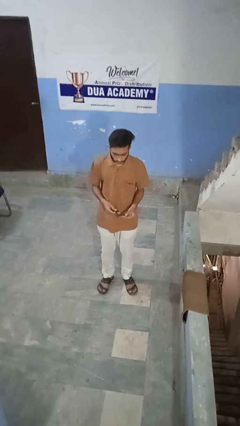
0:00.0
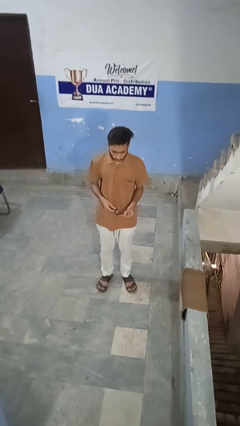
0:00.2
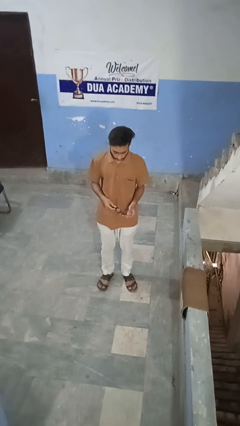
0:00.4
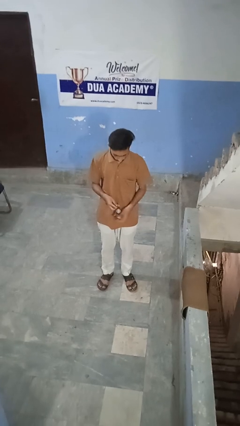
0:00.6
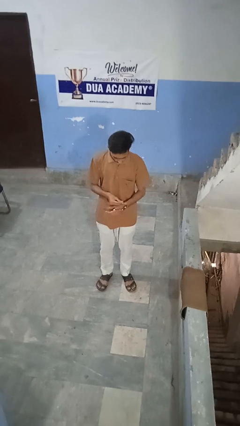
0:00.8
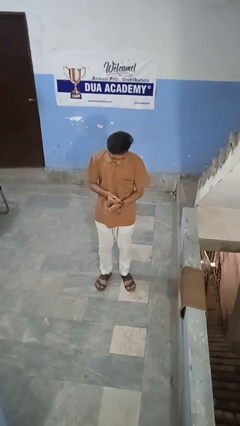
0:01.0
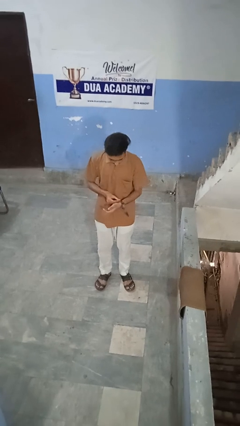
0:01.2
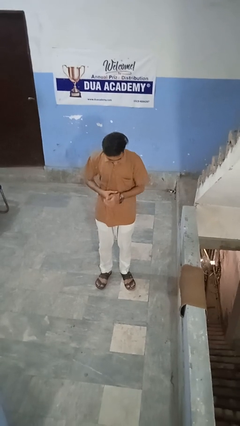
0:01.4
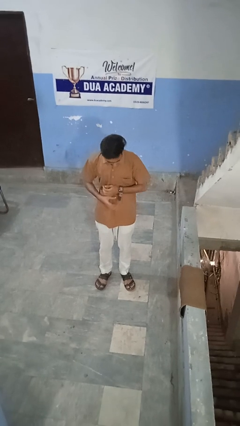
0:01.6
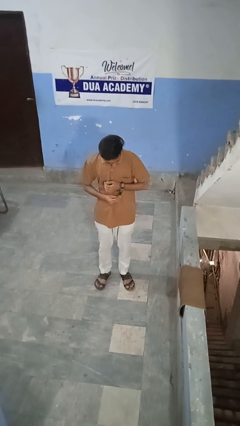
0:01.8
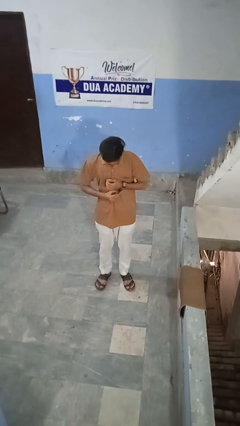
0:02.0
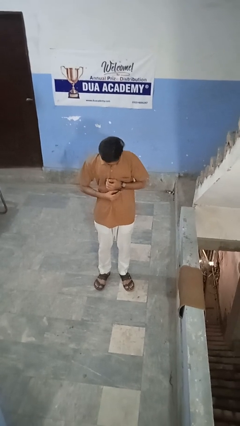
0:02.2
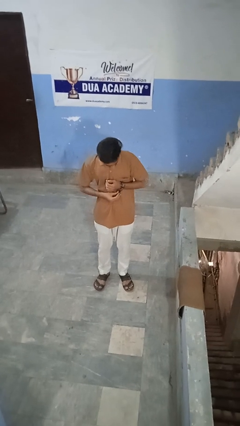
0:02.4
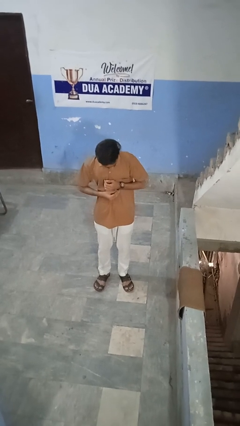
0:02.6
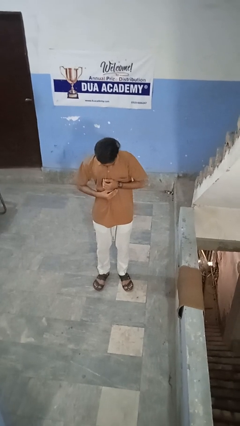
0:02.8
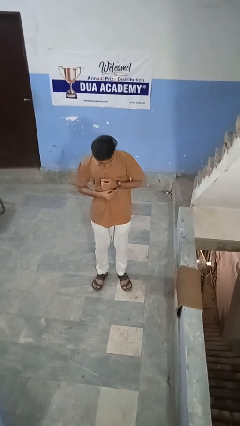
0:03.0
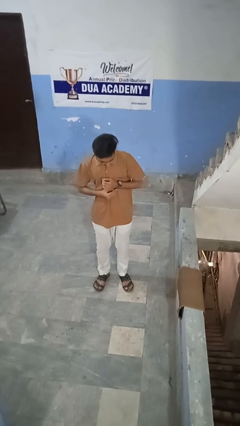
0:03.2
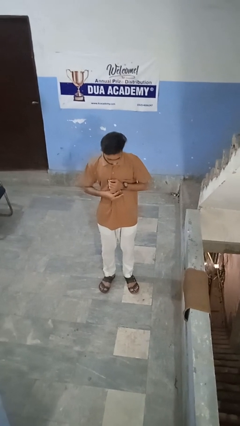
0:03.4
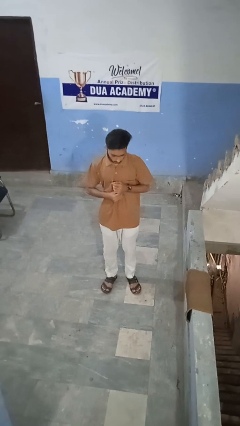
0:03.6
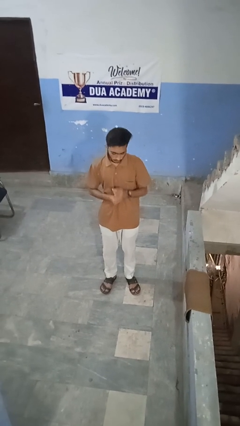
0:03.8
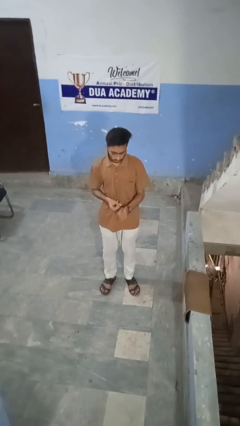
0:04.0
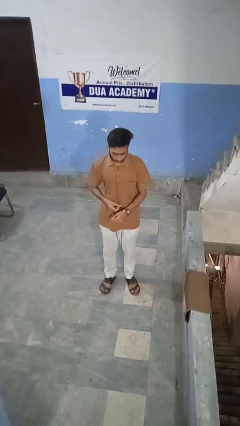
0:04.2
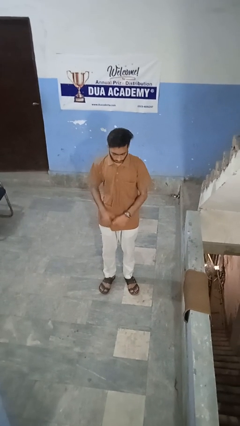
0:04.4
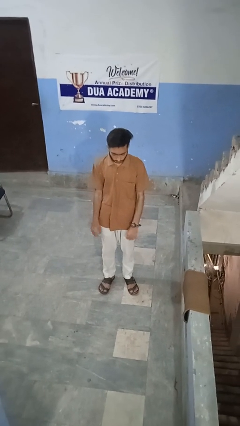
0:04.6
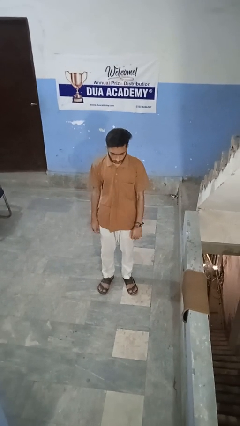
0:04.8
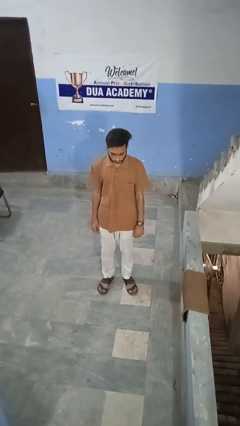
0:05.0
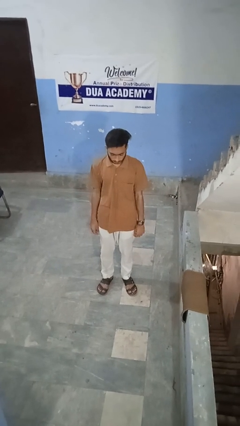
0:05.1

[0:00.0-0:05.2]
person puts on wristwatch

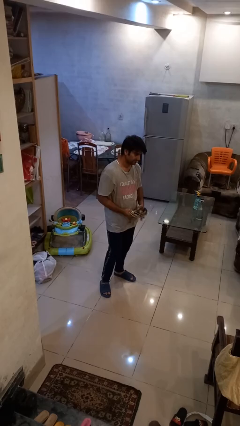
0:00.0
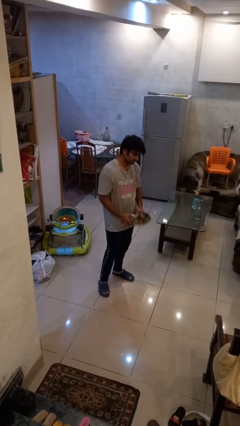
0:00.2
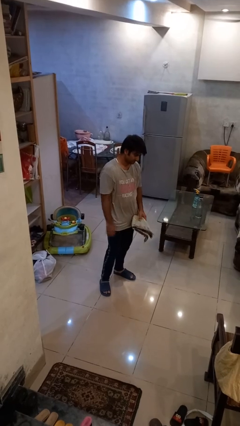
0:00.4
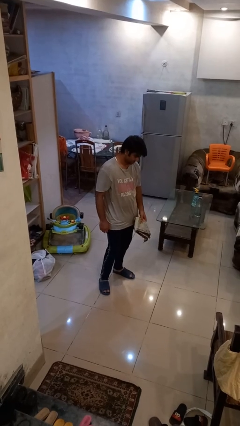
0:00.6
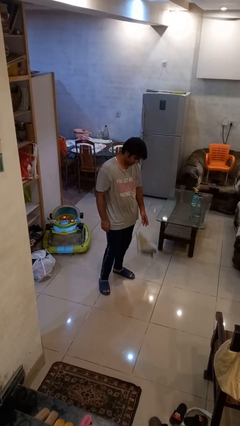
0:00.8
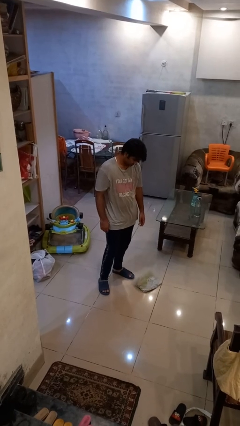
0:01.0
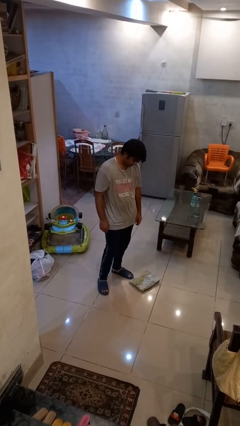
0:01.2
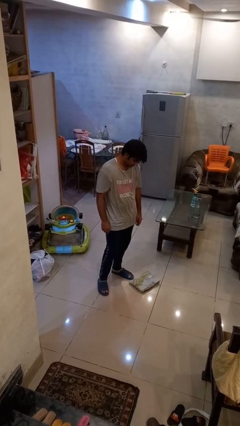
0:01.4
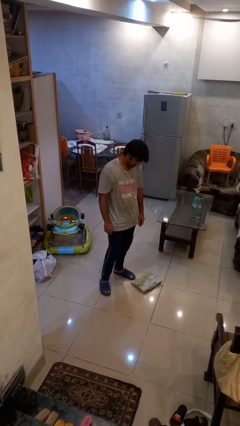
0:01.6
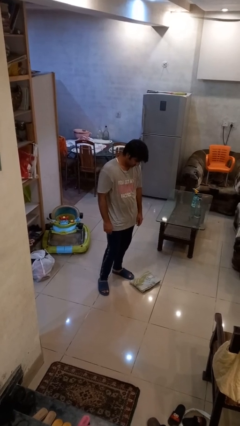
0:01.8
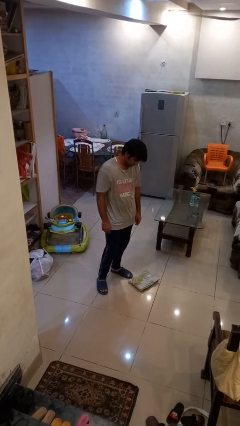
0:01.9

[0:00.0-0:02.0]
person drops object

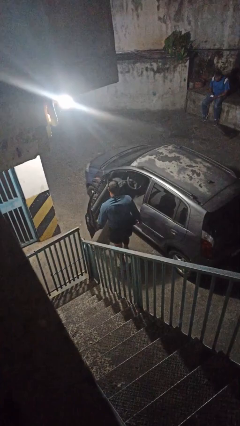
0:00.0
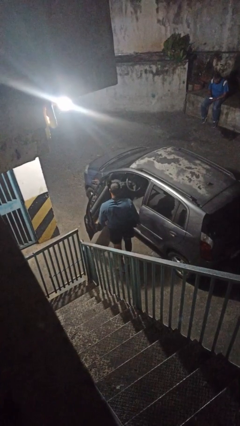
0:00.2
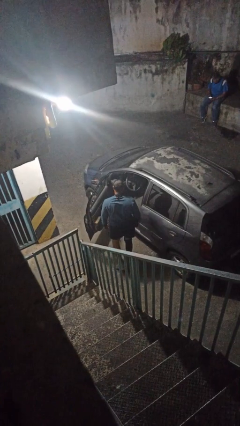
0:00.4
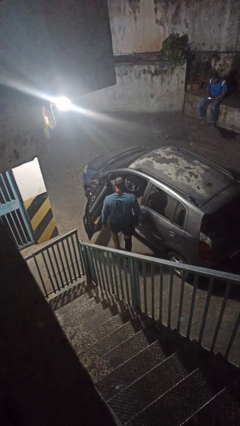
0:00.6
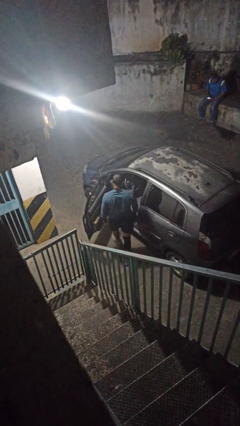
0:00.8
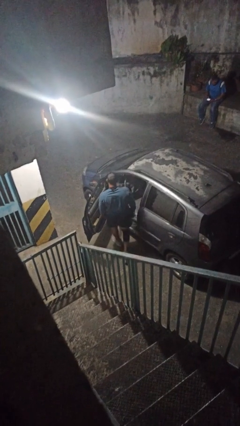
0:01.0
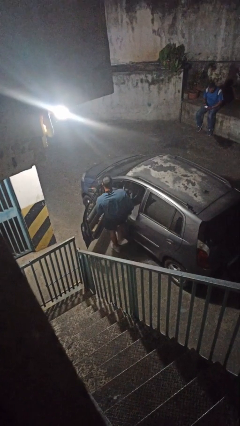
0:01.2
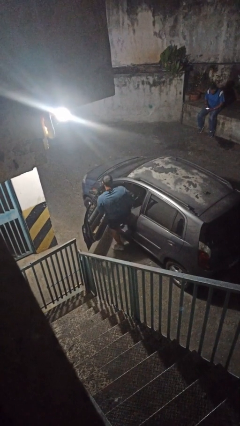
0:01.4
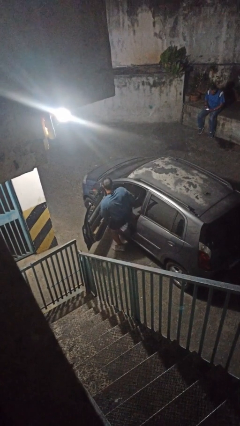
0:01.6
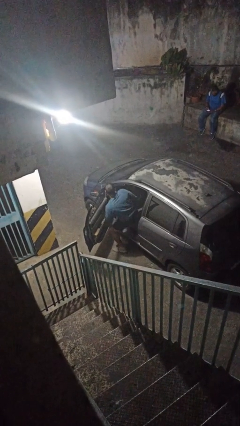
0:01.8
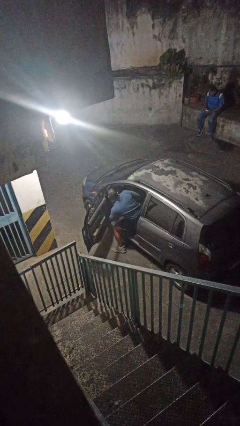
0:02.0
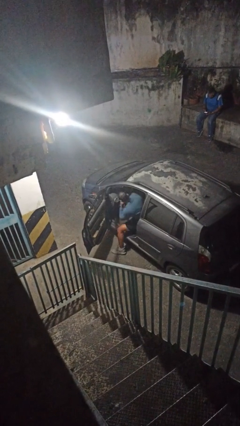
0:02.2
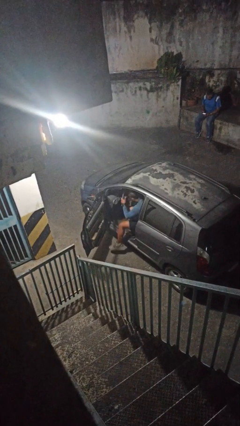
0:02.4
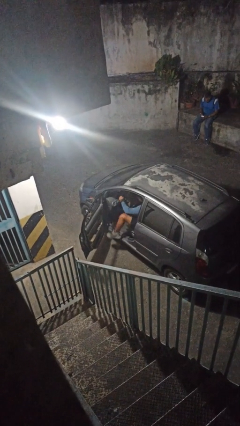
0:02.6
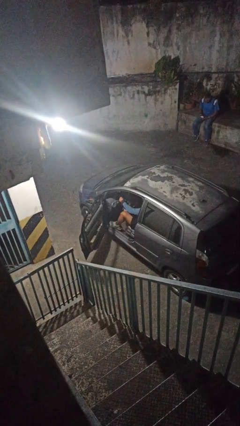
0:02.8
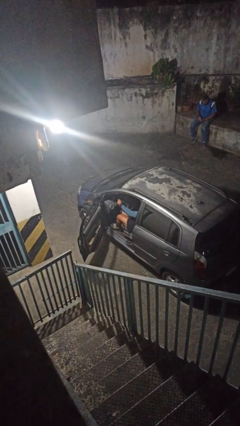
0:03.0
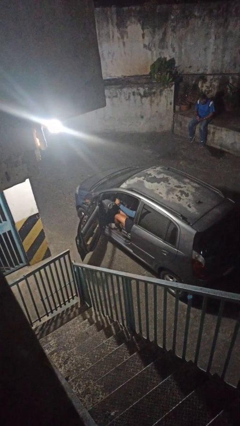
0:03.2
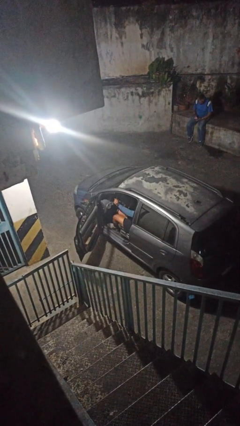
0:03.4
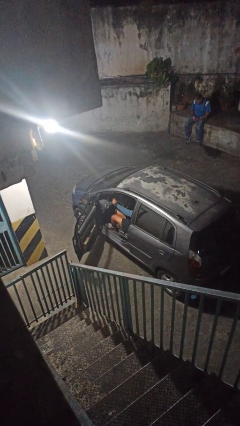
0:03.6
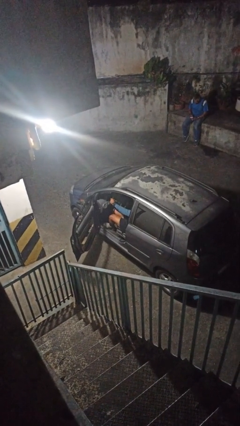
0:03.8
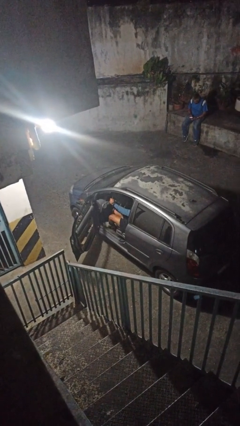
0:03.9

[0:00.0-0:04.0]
person enters car

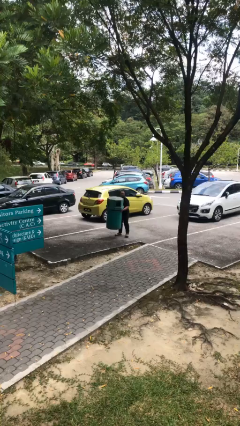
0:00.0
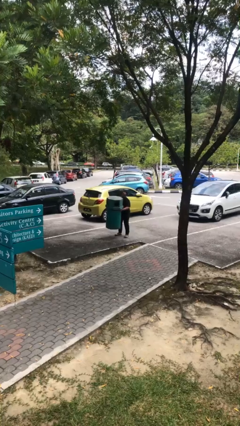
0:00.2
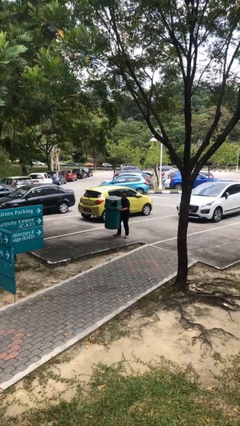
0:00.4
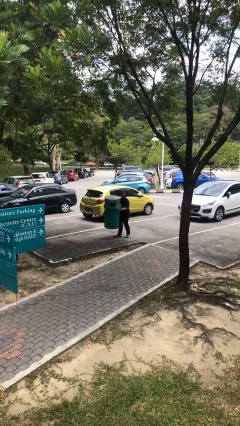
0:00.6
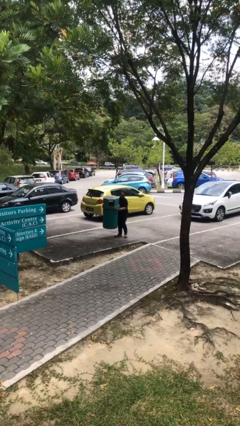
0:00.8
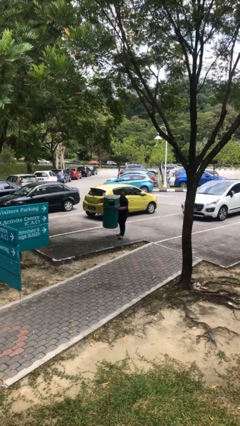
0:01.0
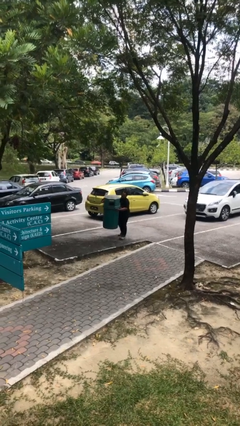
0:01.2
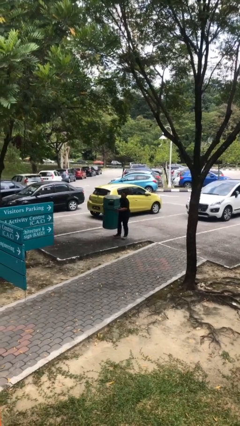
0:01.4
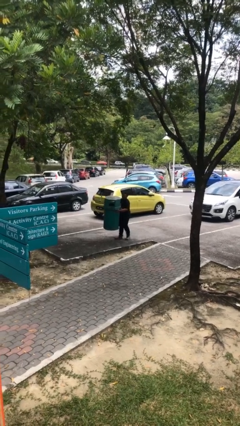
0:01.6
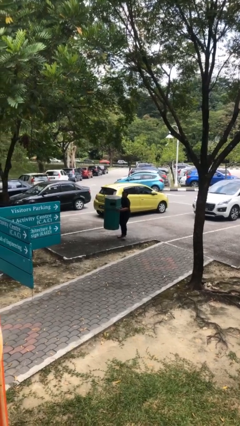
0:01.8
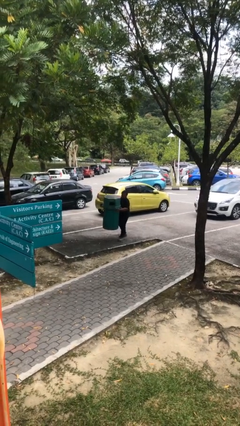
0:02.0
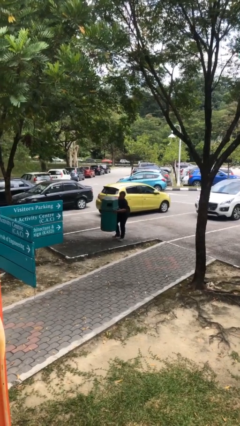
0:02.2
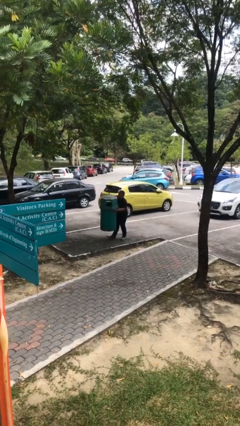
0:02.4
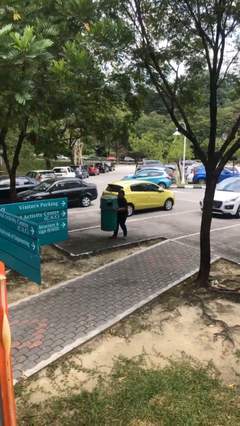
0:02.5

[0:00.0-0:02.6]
person carries heavy object

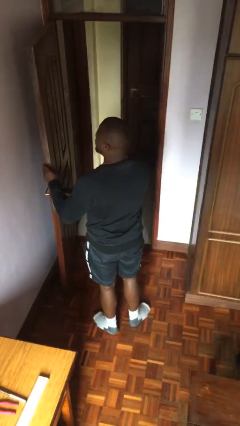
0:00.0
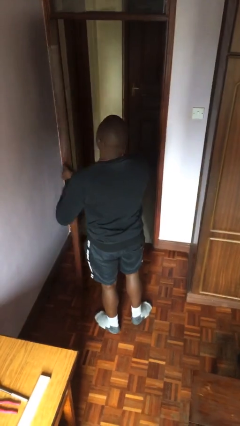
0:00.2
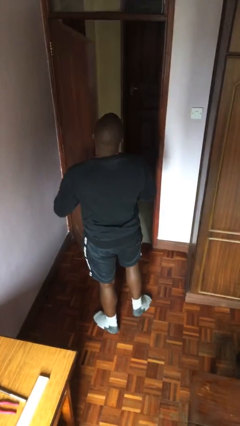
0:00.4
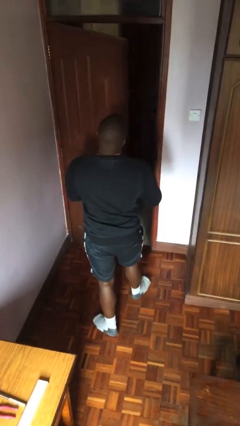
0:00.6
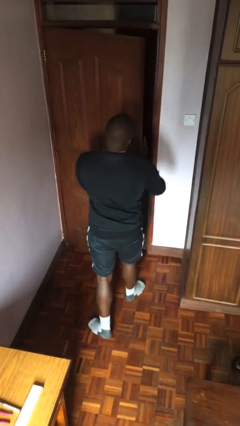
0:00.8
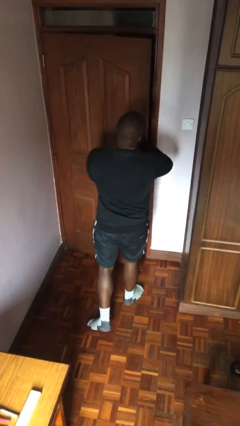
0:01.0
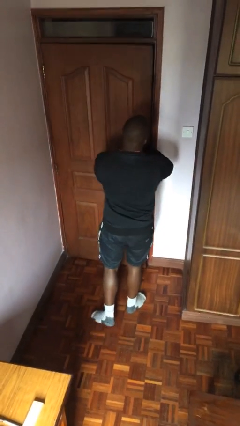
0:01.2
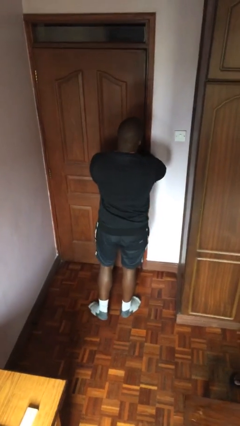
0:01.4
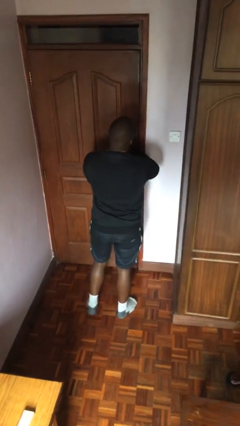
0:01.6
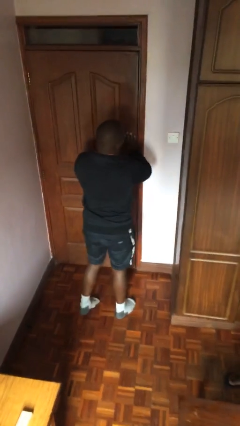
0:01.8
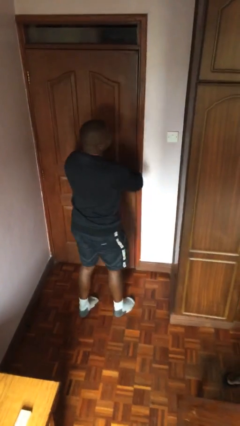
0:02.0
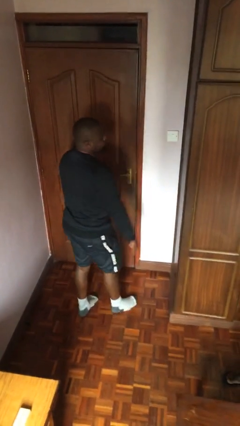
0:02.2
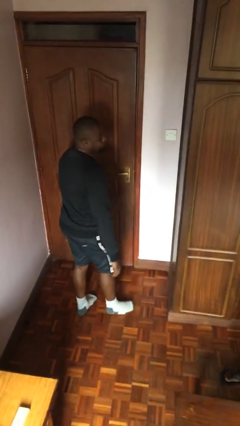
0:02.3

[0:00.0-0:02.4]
person closes facility door

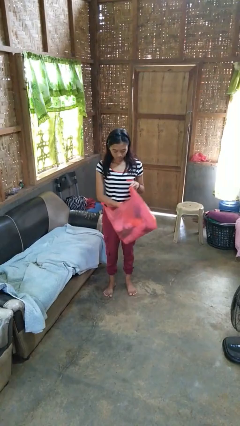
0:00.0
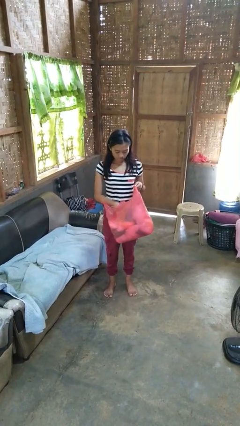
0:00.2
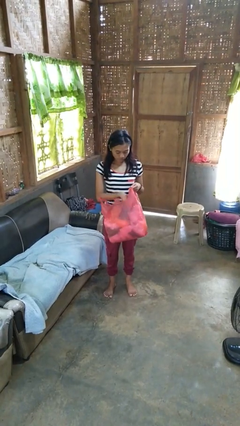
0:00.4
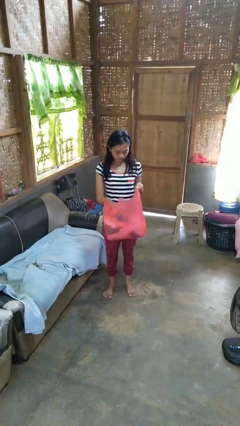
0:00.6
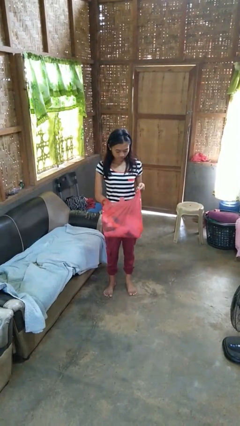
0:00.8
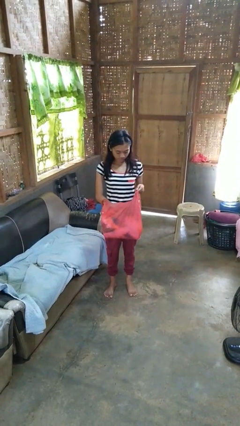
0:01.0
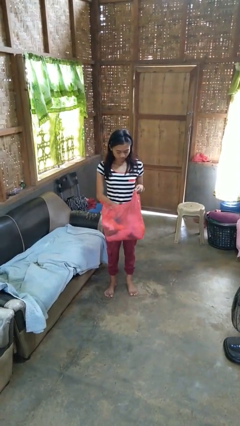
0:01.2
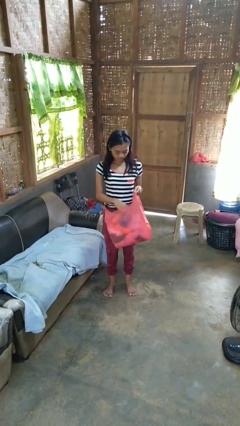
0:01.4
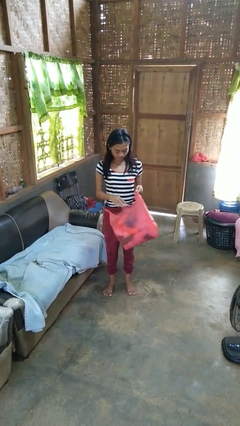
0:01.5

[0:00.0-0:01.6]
person searches in bag
